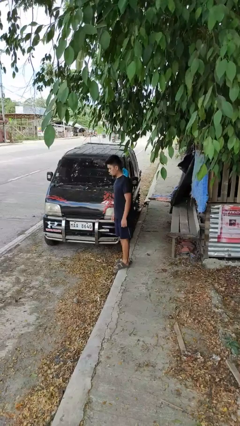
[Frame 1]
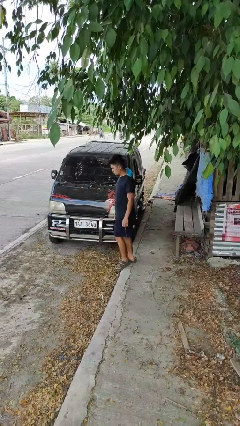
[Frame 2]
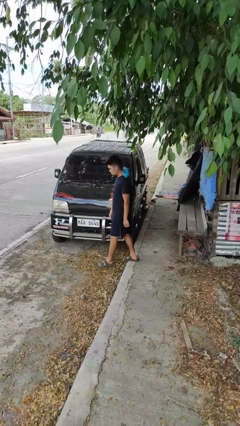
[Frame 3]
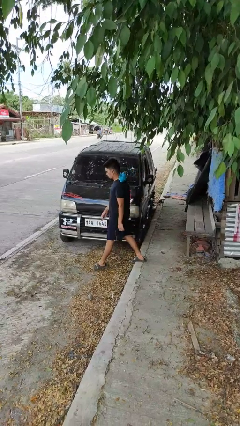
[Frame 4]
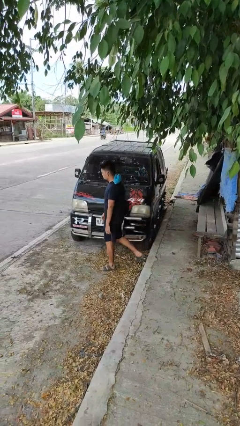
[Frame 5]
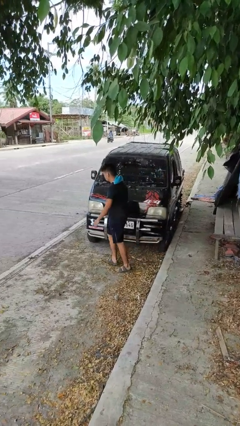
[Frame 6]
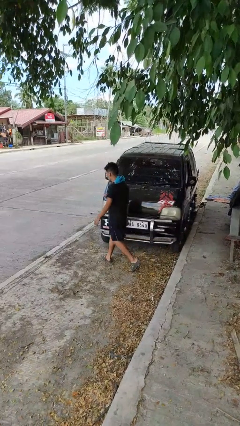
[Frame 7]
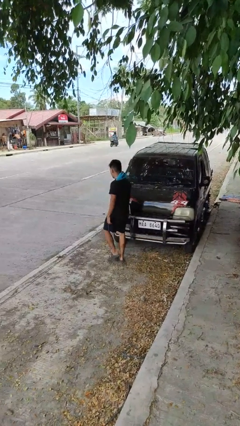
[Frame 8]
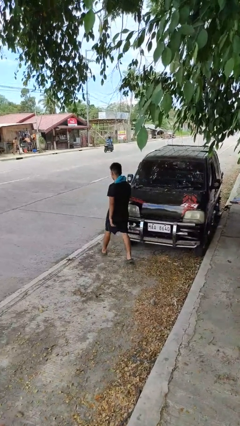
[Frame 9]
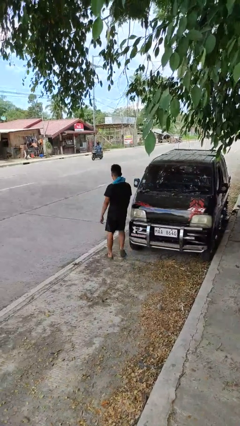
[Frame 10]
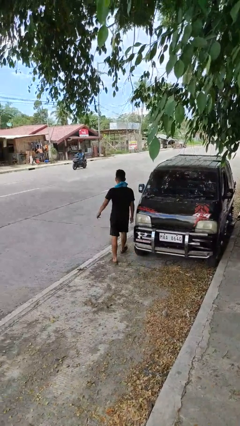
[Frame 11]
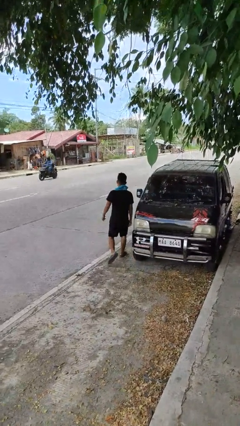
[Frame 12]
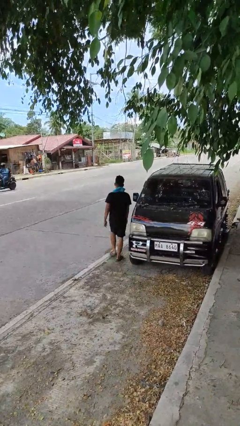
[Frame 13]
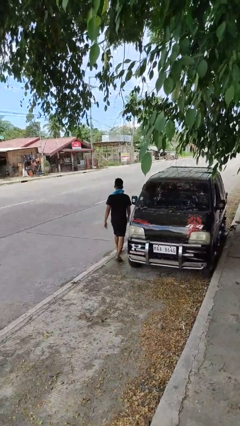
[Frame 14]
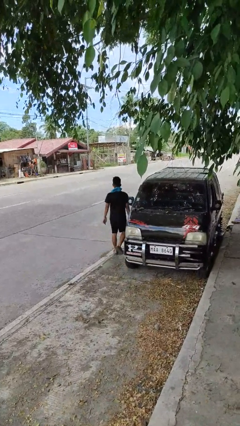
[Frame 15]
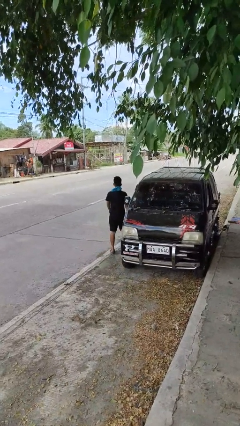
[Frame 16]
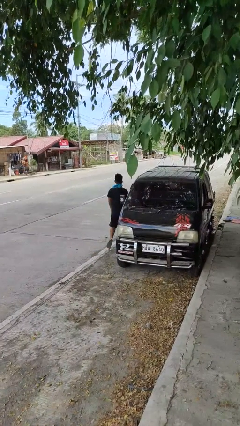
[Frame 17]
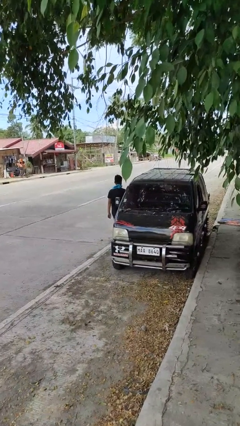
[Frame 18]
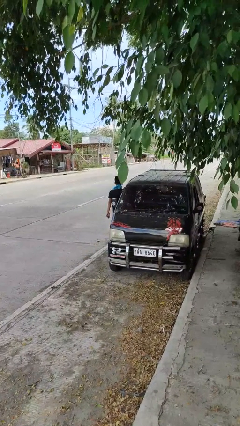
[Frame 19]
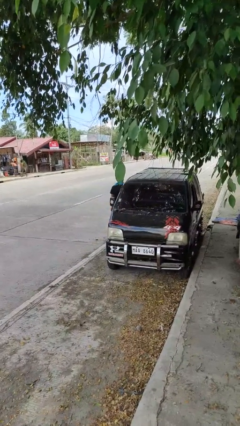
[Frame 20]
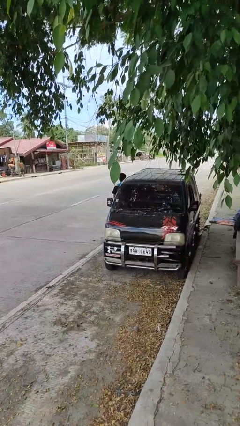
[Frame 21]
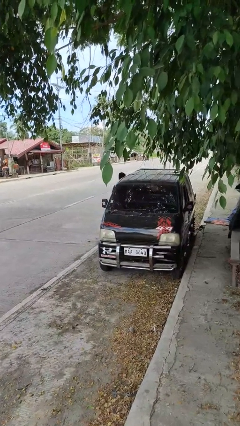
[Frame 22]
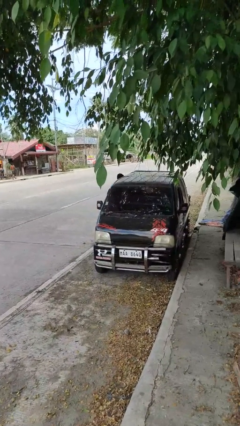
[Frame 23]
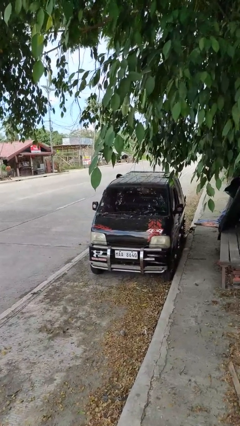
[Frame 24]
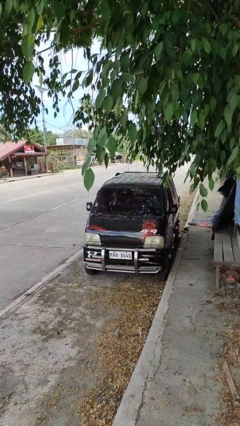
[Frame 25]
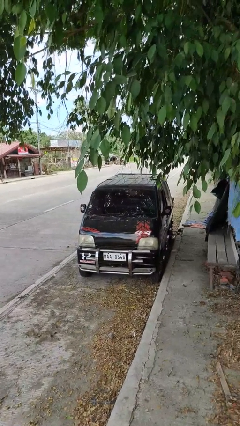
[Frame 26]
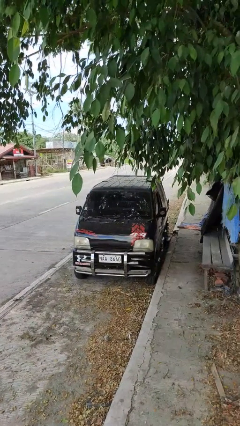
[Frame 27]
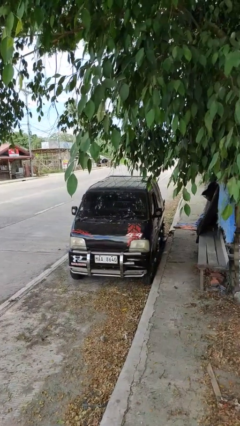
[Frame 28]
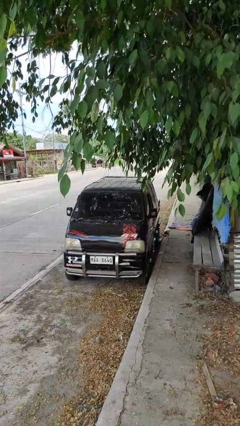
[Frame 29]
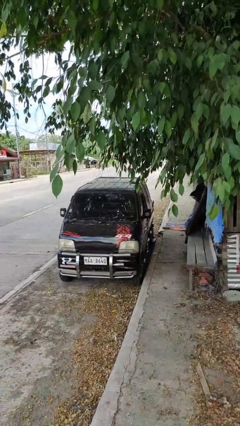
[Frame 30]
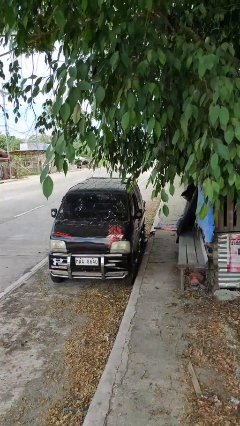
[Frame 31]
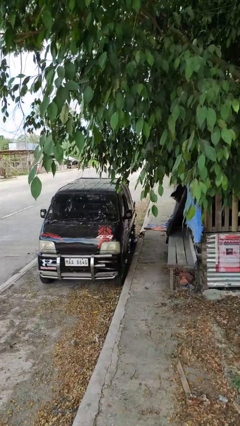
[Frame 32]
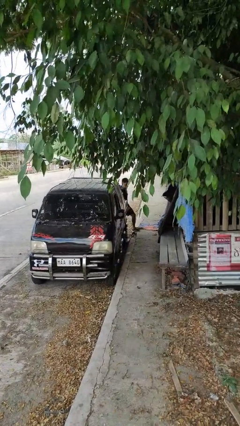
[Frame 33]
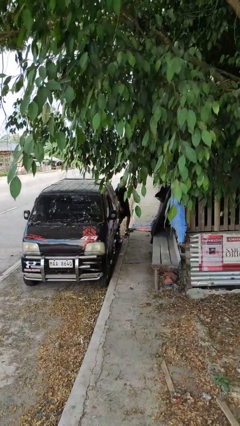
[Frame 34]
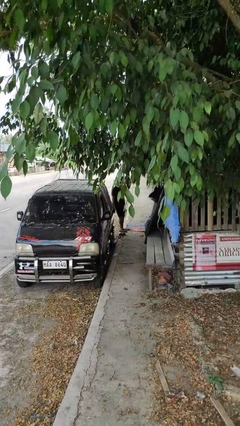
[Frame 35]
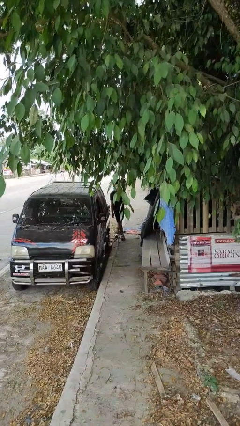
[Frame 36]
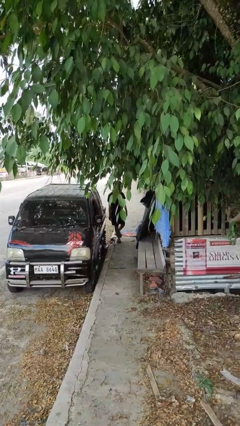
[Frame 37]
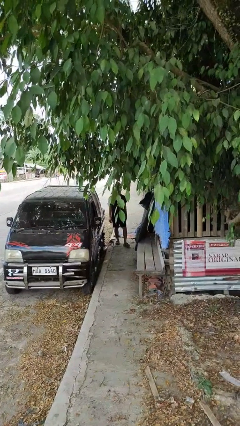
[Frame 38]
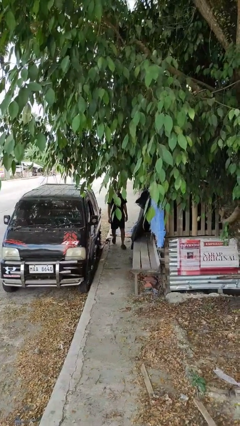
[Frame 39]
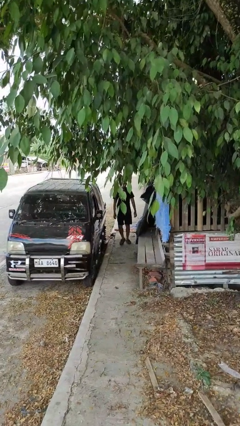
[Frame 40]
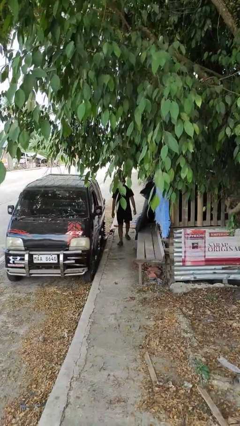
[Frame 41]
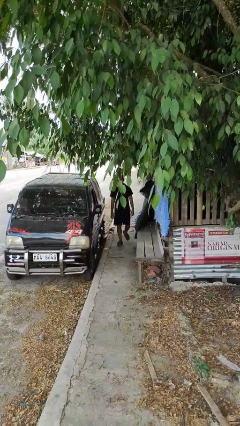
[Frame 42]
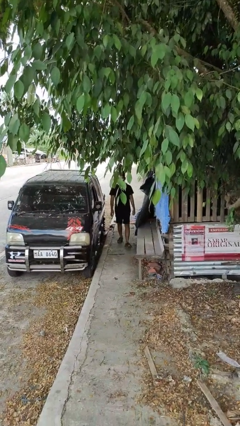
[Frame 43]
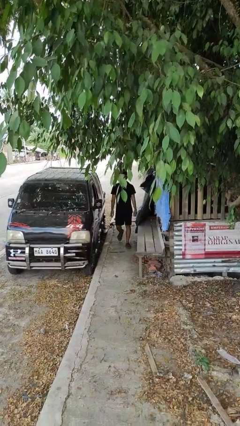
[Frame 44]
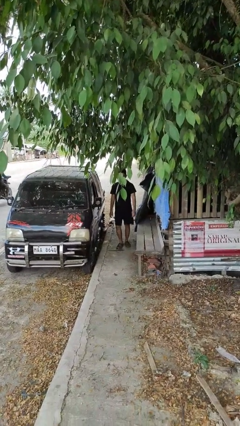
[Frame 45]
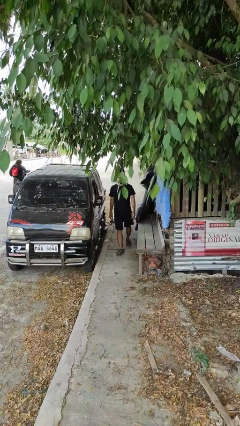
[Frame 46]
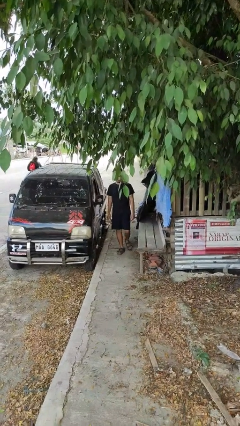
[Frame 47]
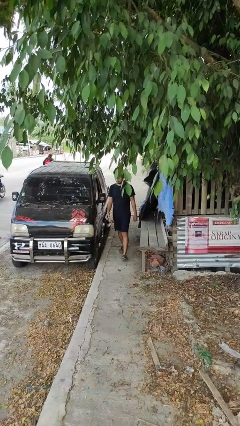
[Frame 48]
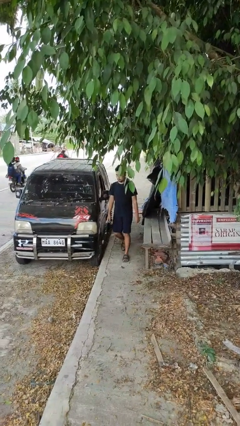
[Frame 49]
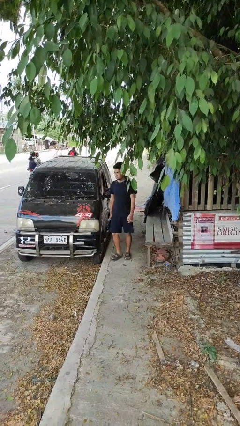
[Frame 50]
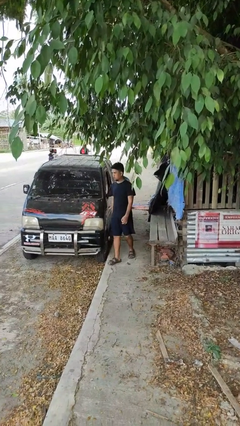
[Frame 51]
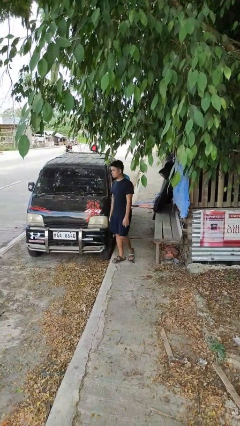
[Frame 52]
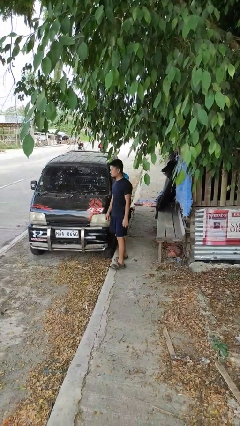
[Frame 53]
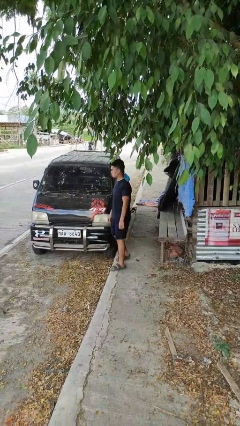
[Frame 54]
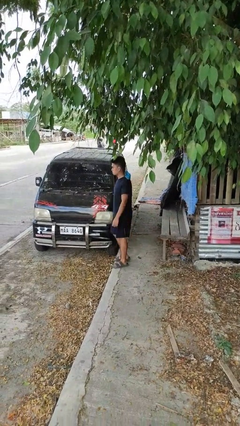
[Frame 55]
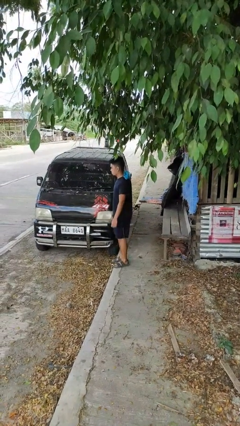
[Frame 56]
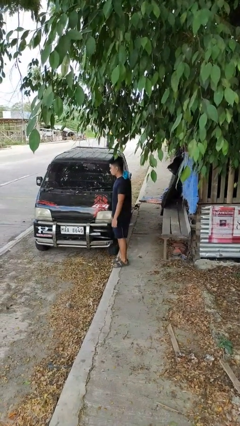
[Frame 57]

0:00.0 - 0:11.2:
person walks around car

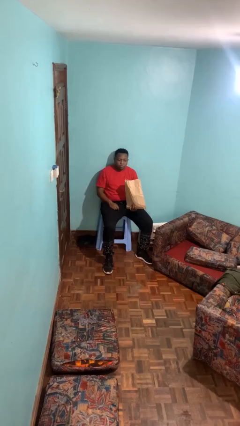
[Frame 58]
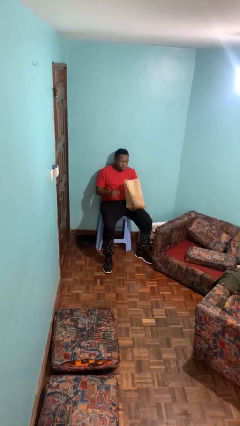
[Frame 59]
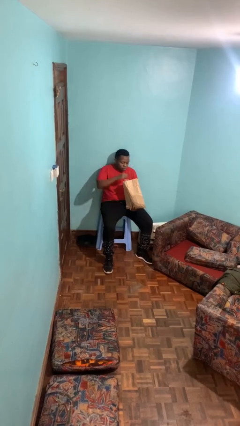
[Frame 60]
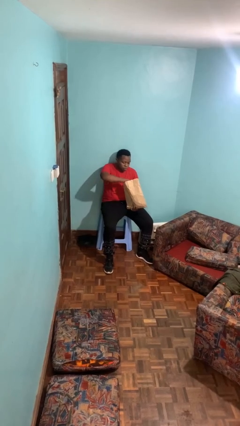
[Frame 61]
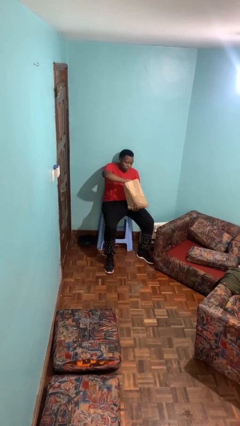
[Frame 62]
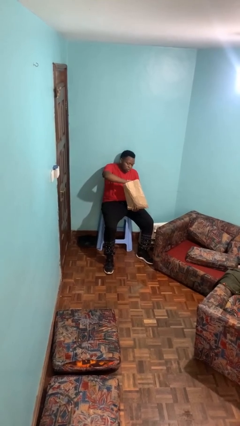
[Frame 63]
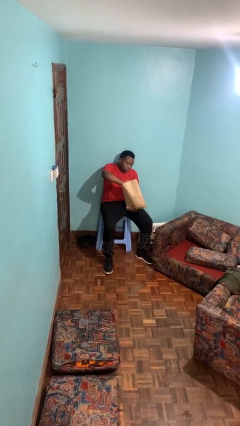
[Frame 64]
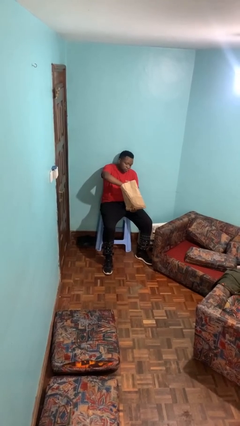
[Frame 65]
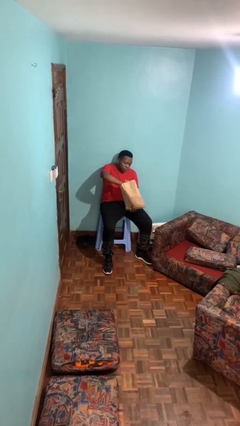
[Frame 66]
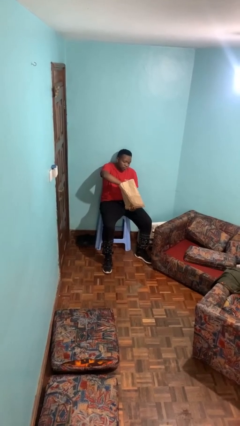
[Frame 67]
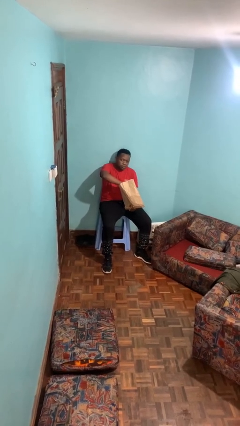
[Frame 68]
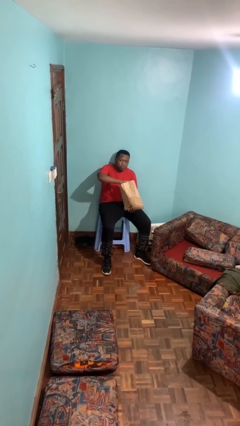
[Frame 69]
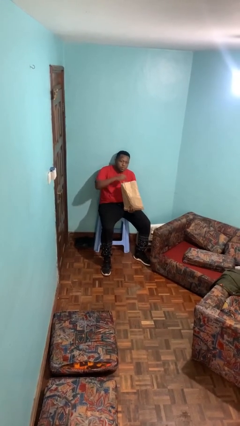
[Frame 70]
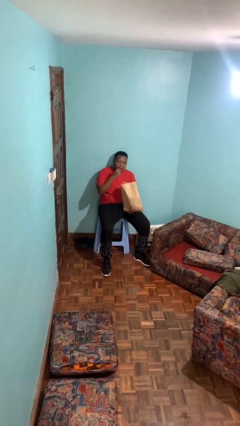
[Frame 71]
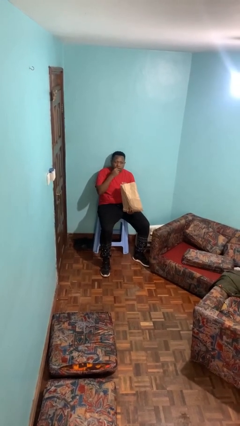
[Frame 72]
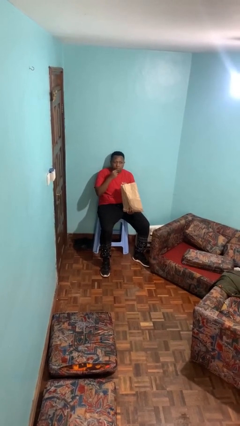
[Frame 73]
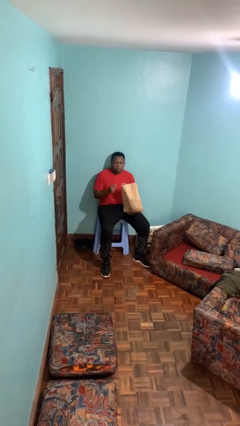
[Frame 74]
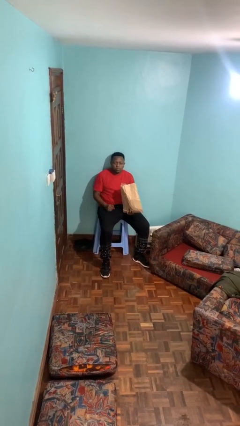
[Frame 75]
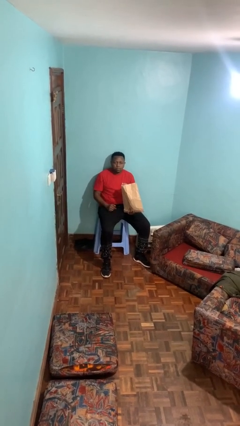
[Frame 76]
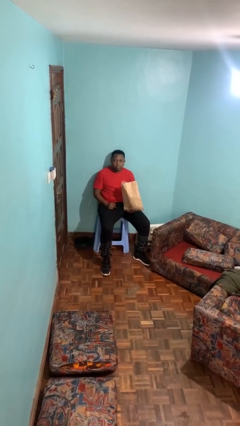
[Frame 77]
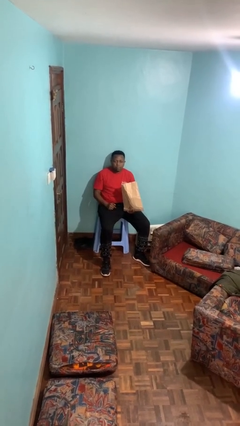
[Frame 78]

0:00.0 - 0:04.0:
person eats snack from bag

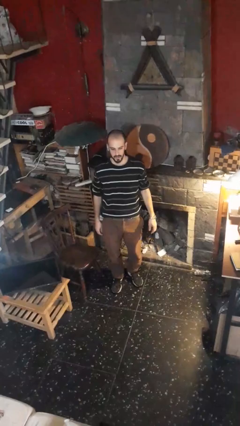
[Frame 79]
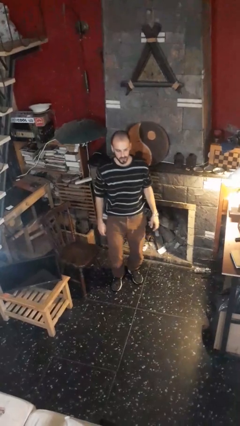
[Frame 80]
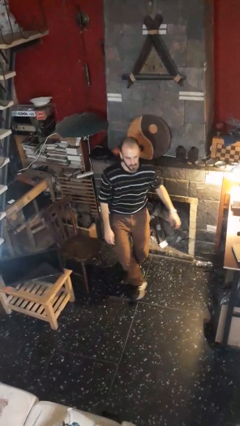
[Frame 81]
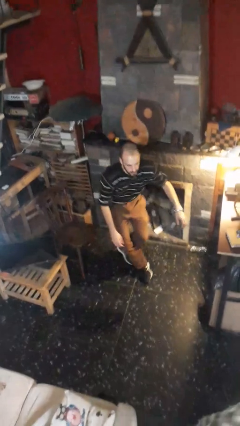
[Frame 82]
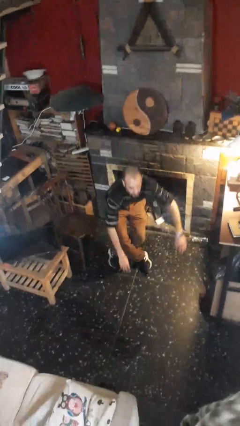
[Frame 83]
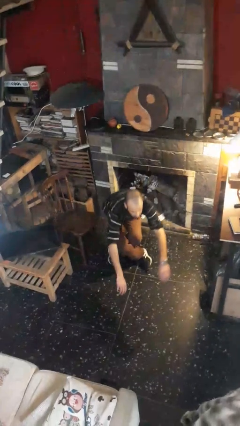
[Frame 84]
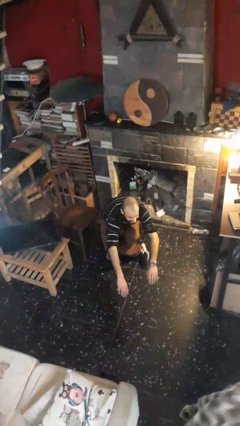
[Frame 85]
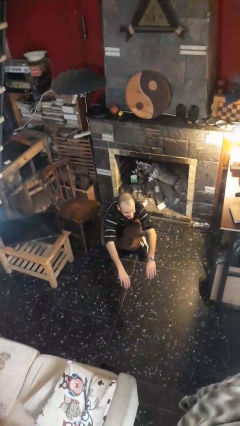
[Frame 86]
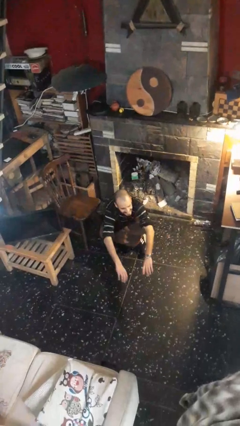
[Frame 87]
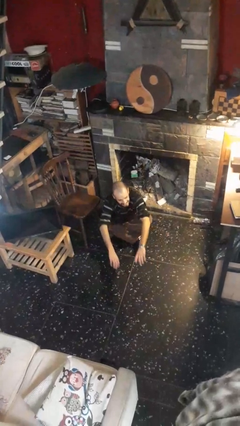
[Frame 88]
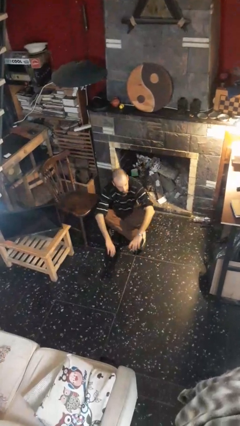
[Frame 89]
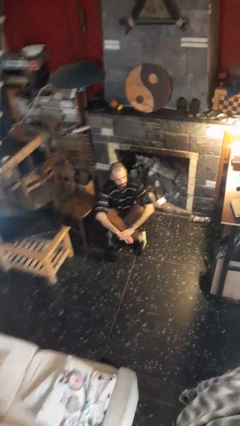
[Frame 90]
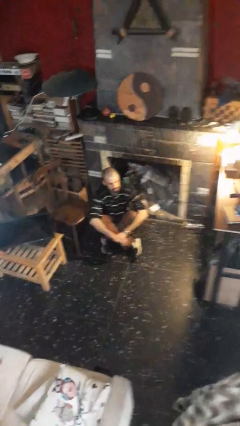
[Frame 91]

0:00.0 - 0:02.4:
person sits crisscross

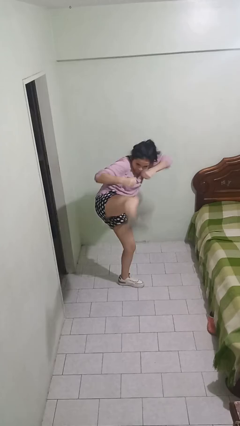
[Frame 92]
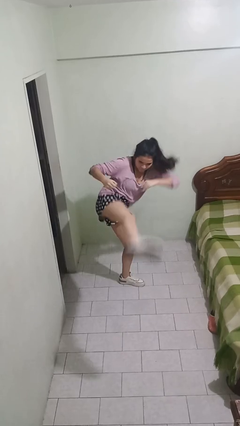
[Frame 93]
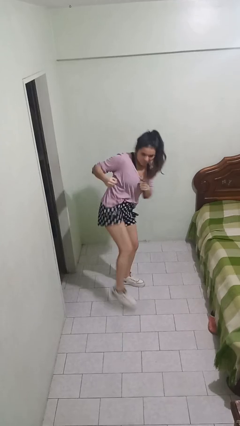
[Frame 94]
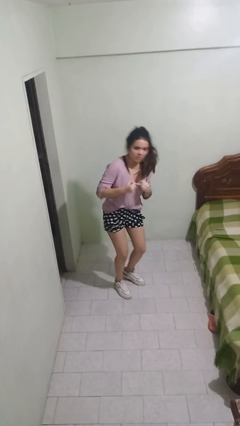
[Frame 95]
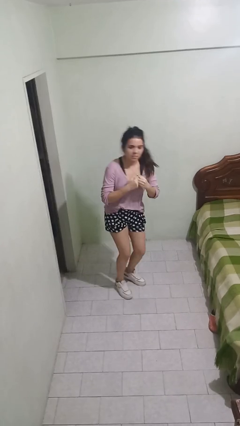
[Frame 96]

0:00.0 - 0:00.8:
person karate kicks
